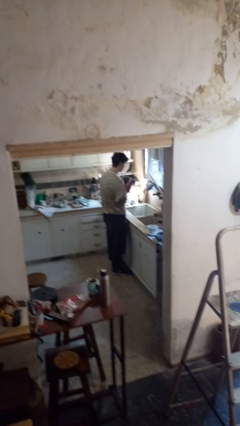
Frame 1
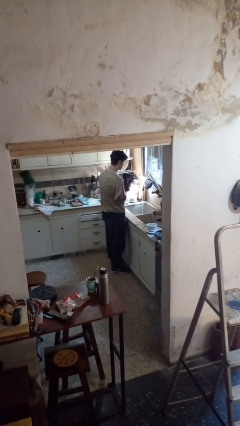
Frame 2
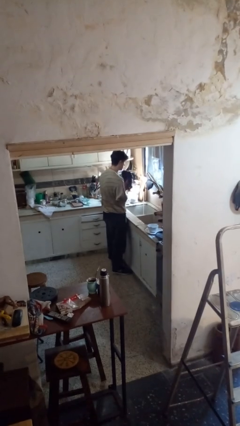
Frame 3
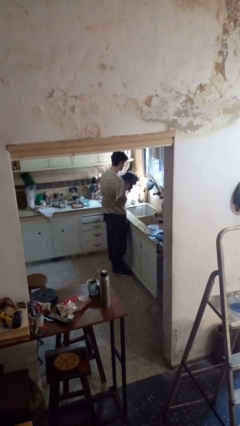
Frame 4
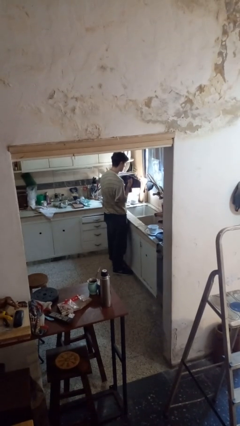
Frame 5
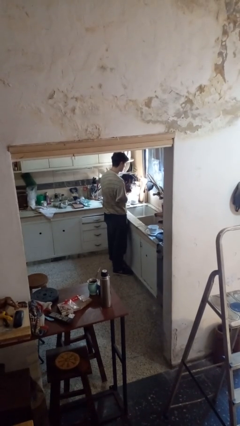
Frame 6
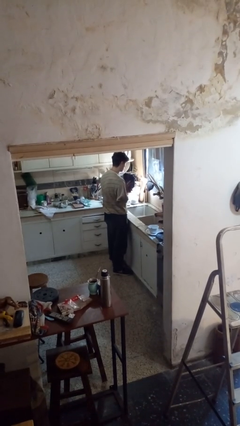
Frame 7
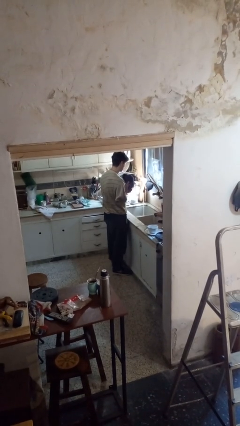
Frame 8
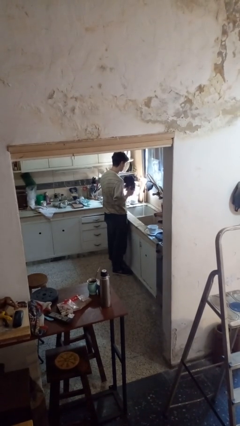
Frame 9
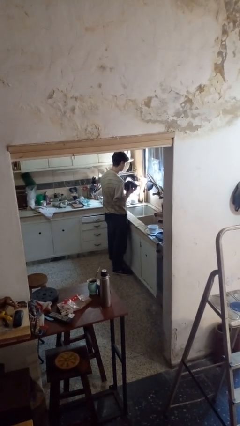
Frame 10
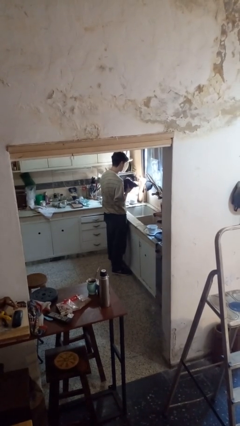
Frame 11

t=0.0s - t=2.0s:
person dries hands with towel

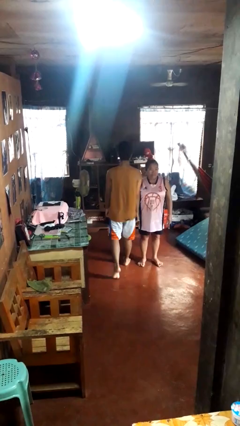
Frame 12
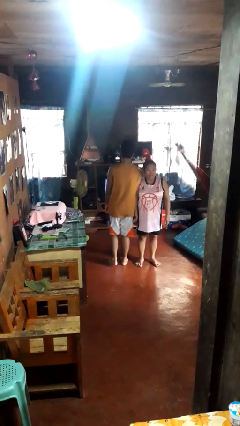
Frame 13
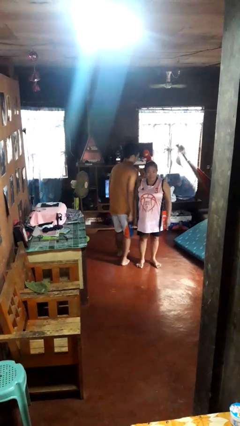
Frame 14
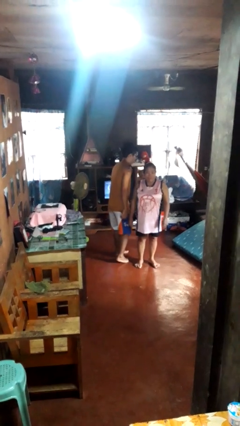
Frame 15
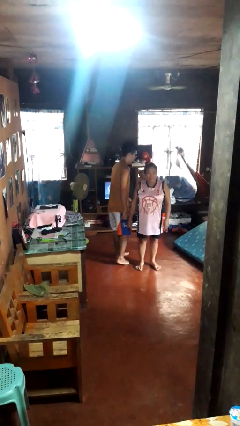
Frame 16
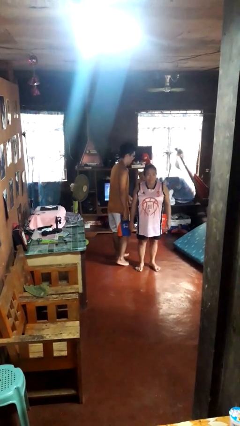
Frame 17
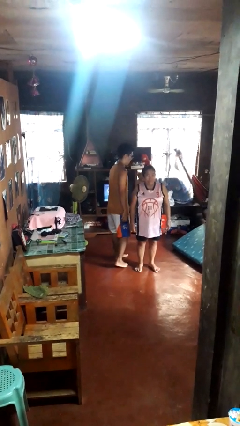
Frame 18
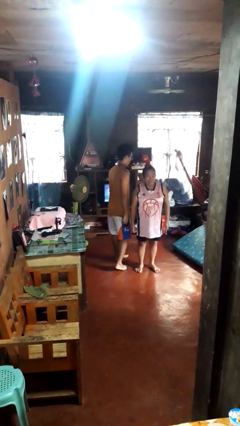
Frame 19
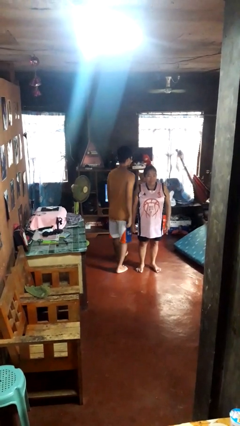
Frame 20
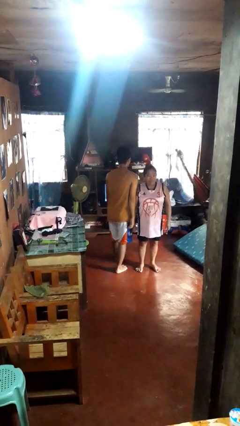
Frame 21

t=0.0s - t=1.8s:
person bumps into person

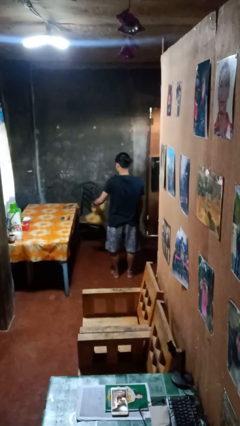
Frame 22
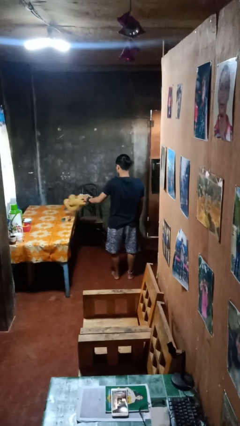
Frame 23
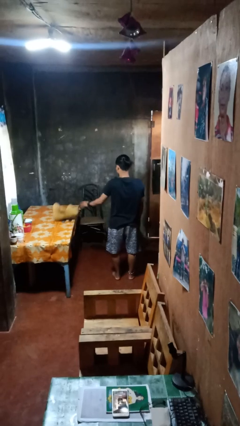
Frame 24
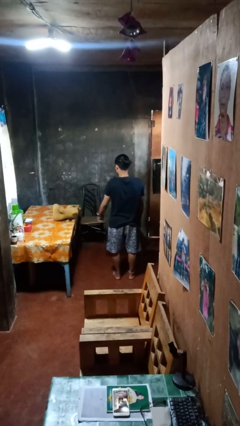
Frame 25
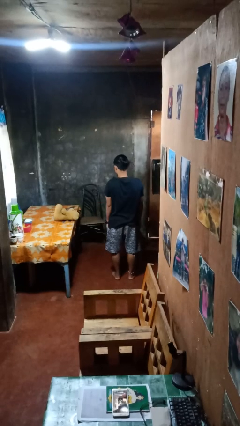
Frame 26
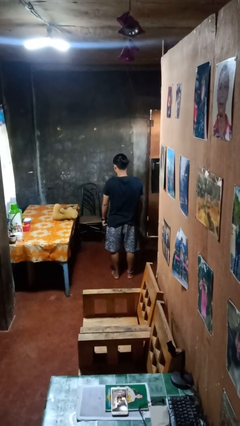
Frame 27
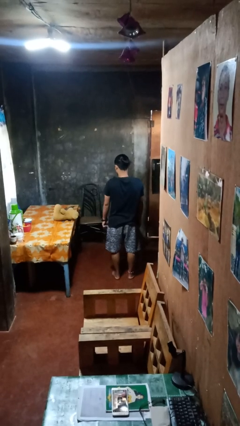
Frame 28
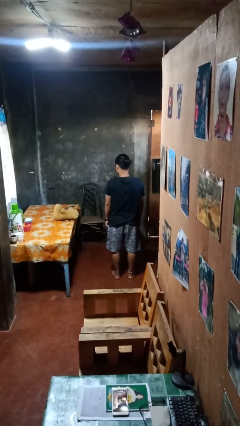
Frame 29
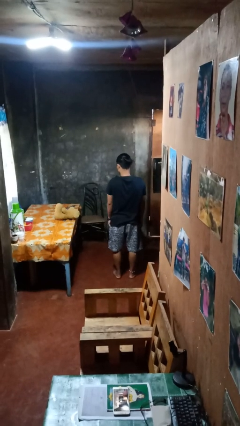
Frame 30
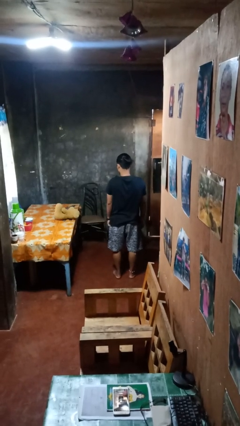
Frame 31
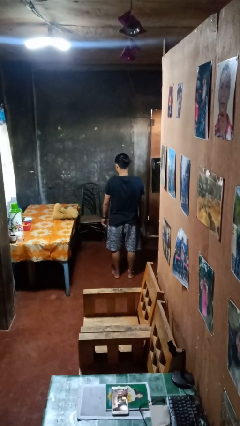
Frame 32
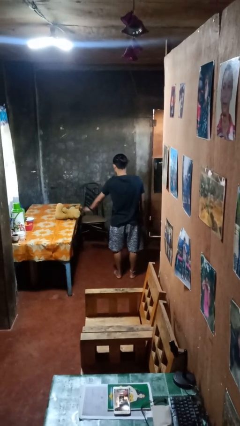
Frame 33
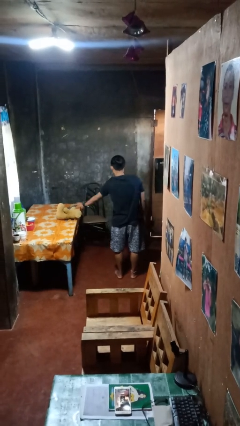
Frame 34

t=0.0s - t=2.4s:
person throws object on table

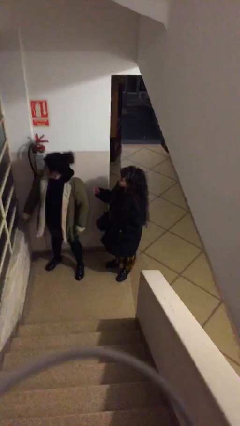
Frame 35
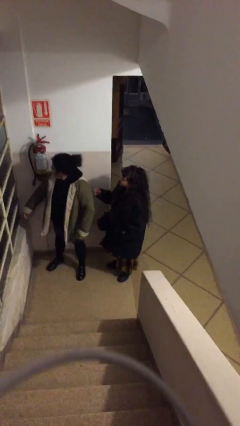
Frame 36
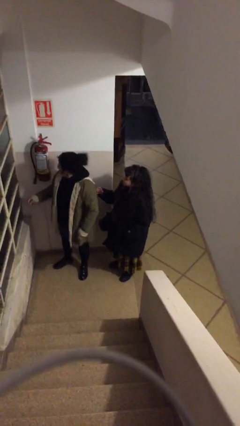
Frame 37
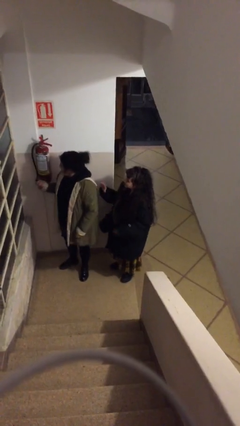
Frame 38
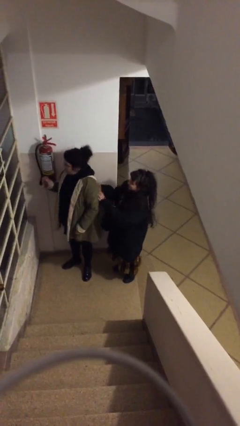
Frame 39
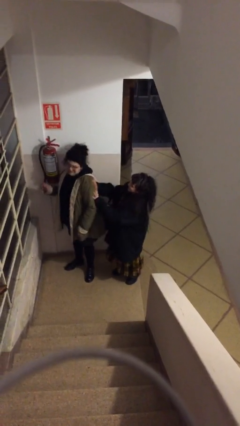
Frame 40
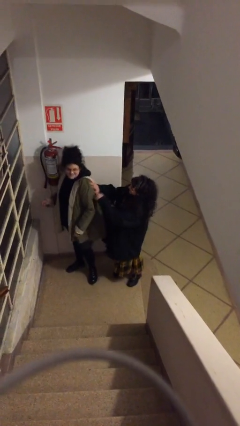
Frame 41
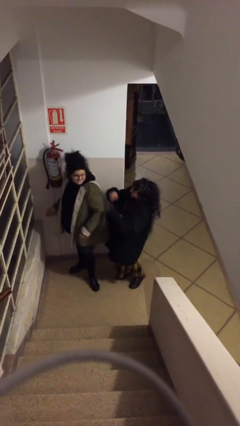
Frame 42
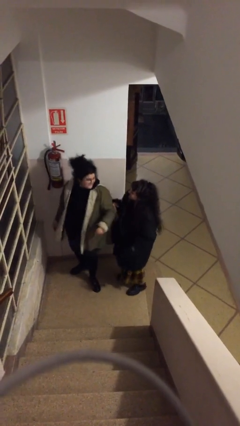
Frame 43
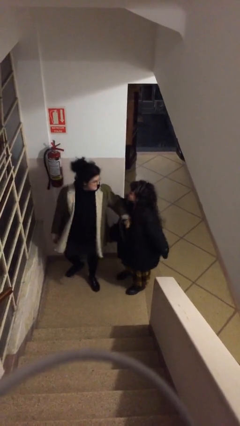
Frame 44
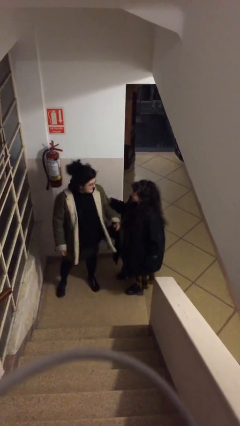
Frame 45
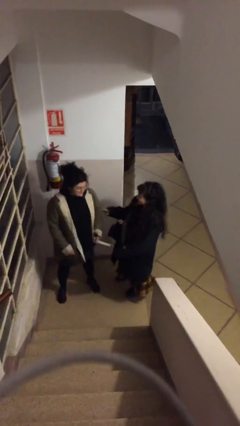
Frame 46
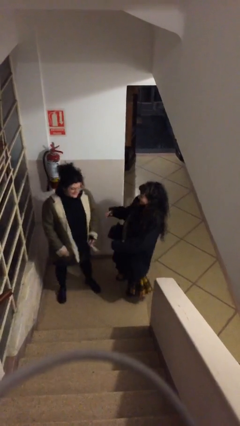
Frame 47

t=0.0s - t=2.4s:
person shoves person

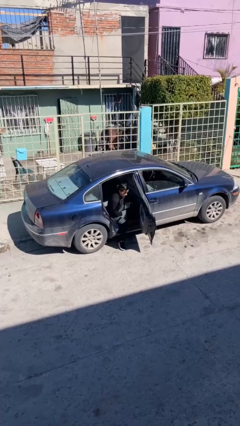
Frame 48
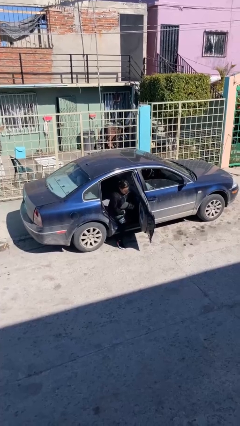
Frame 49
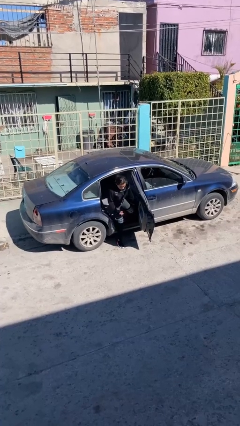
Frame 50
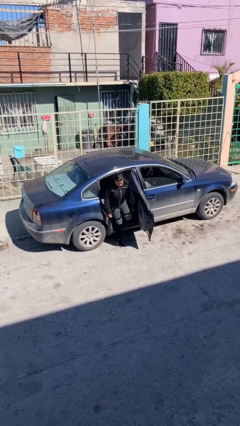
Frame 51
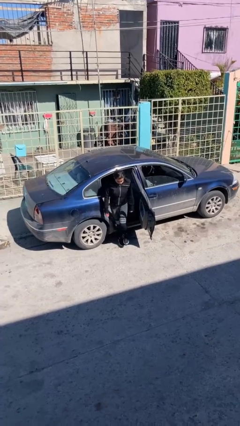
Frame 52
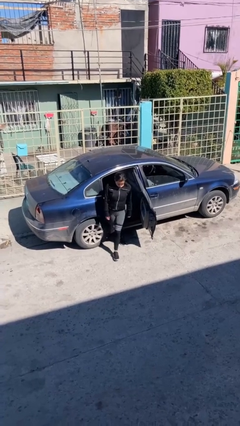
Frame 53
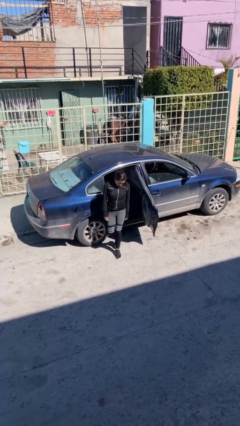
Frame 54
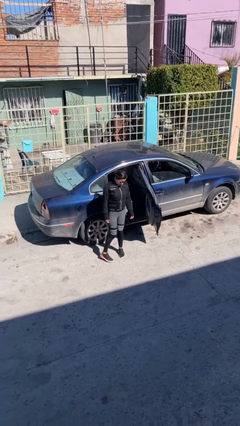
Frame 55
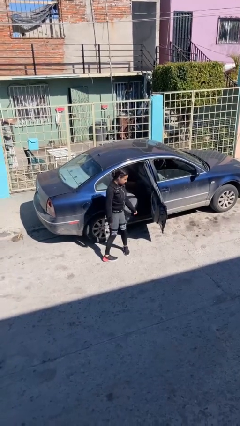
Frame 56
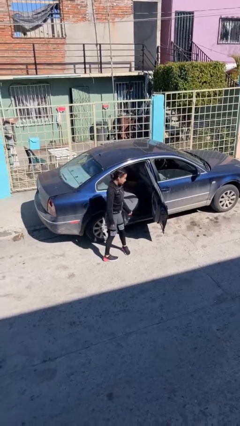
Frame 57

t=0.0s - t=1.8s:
person exits car

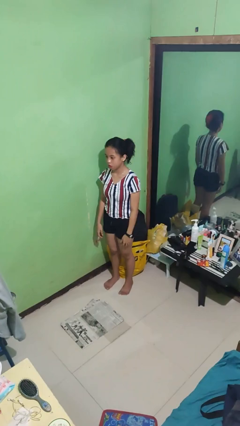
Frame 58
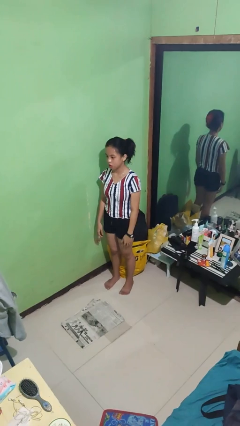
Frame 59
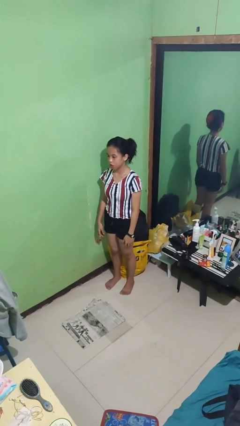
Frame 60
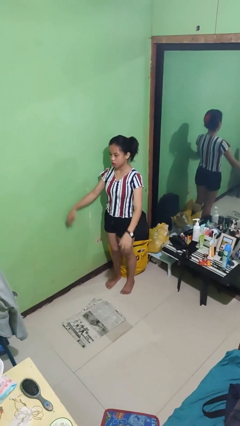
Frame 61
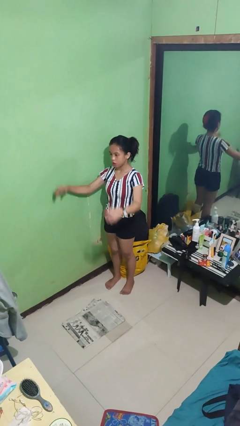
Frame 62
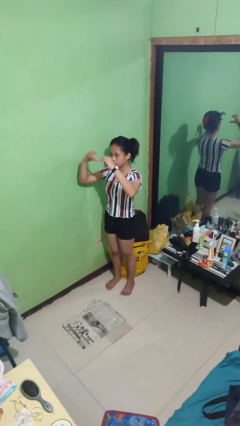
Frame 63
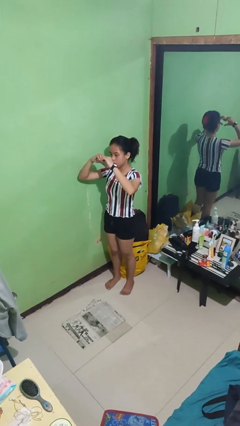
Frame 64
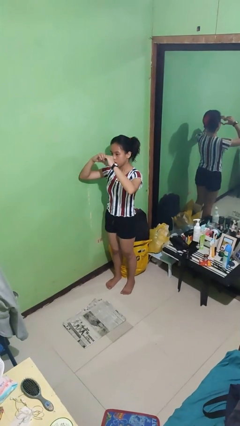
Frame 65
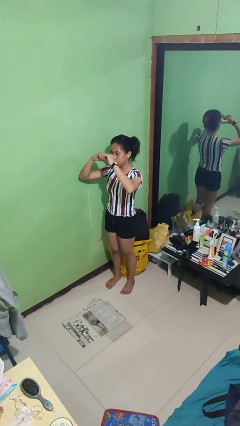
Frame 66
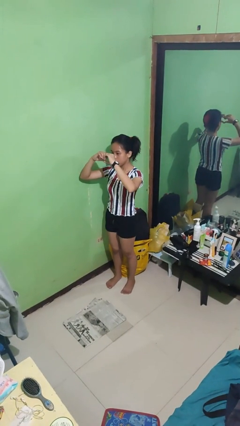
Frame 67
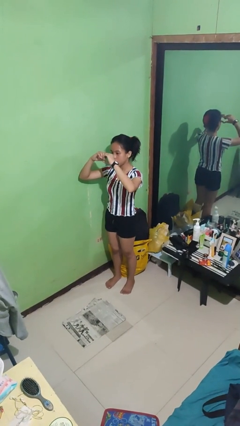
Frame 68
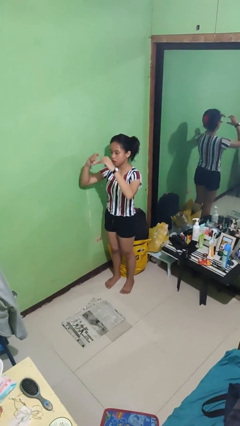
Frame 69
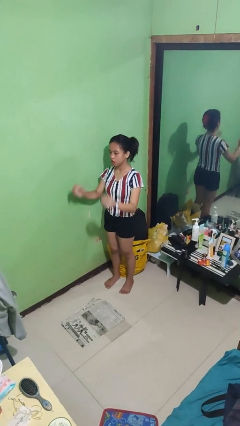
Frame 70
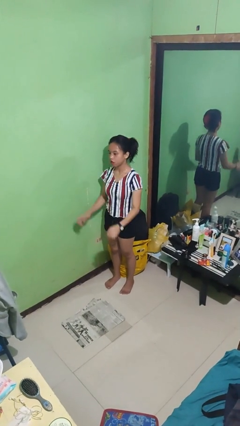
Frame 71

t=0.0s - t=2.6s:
person gestures heart

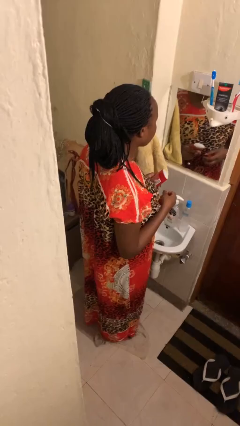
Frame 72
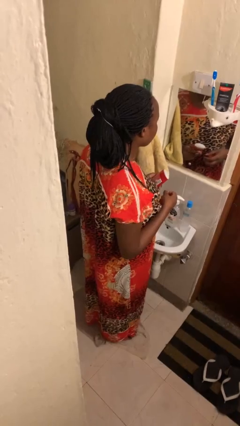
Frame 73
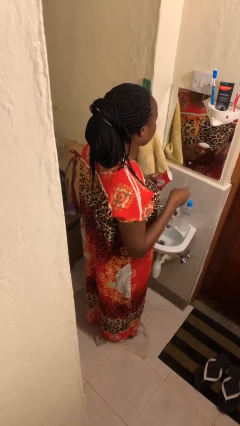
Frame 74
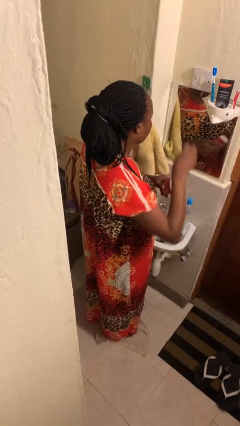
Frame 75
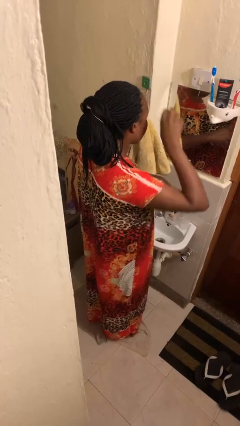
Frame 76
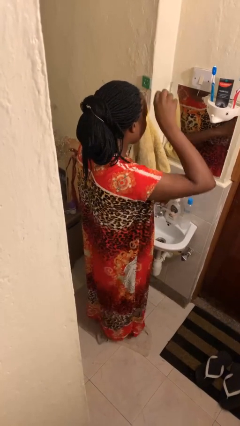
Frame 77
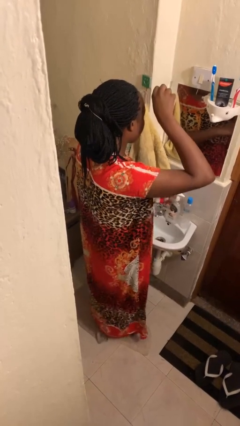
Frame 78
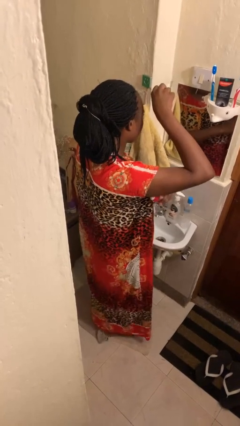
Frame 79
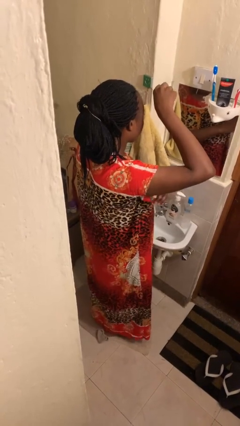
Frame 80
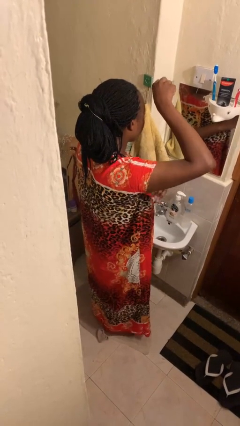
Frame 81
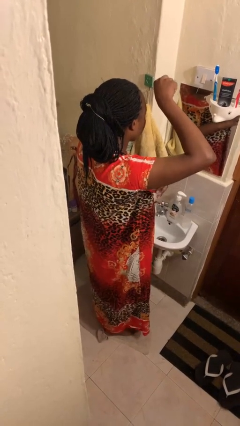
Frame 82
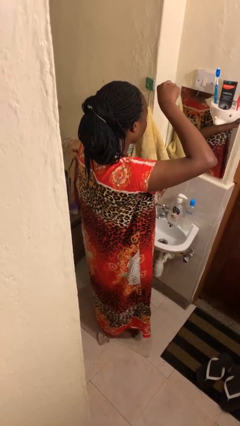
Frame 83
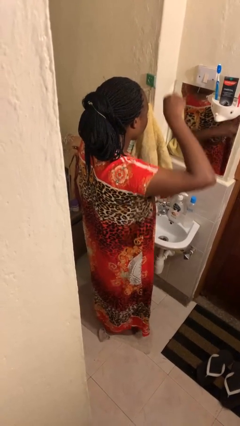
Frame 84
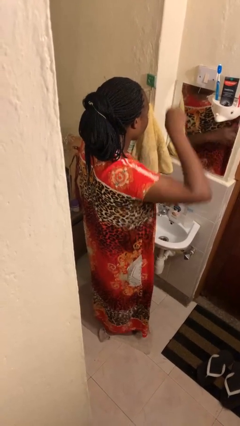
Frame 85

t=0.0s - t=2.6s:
person applies deodorant

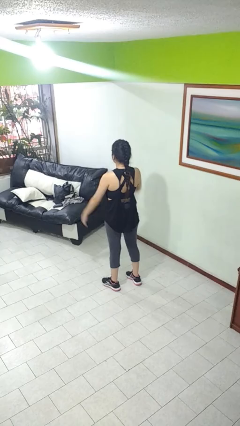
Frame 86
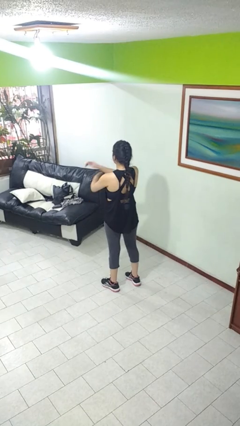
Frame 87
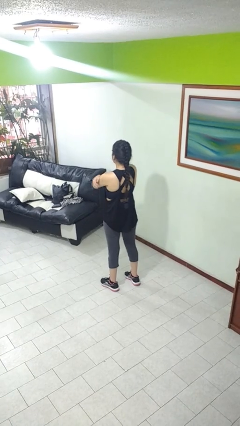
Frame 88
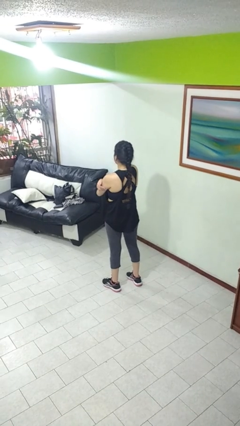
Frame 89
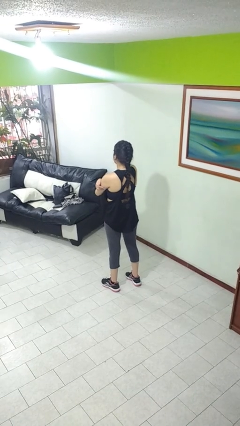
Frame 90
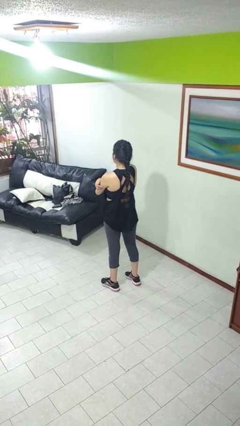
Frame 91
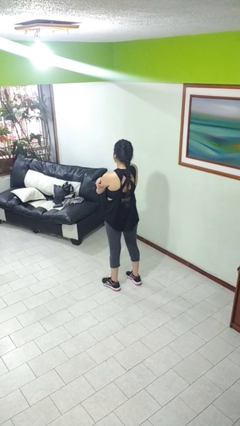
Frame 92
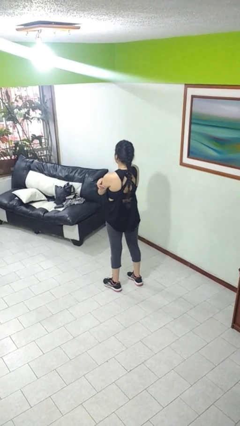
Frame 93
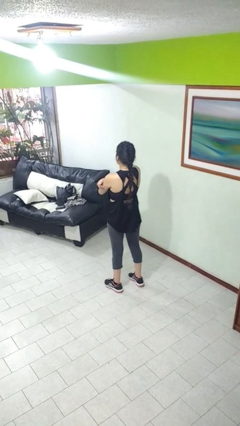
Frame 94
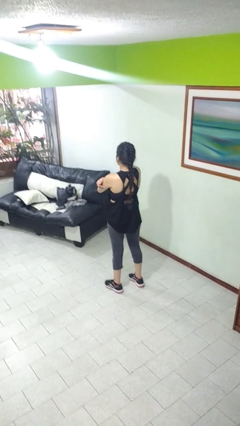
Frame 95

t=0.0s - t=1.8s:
person crosses arms
